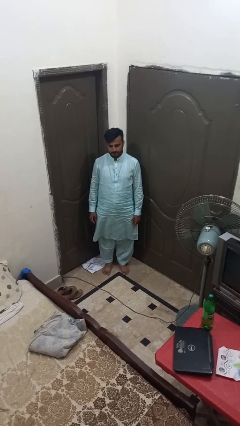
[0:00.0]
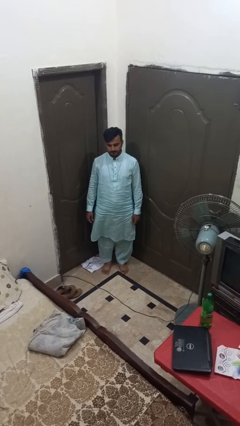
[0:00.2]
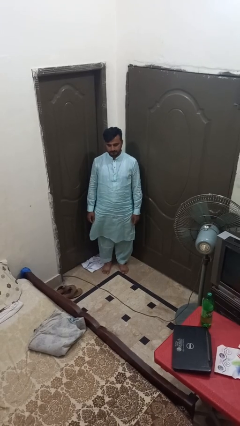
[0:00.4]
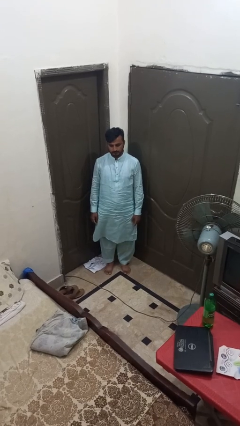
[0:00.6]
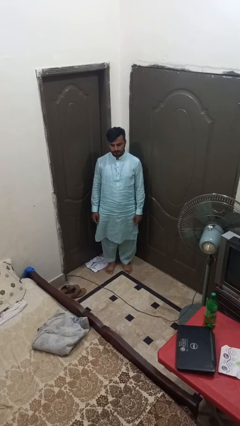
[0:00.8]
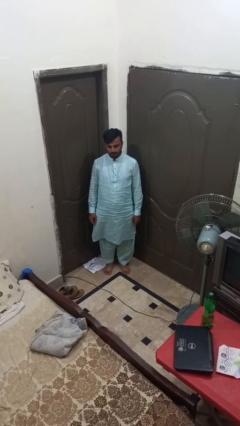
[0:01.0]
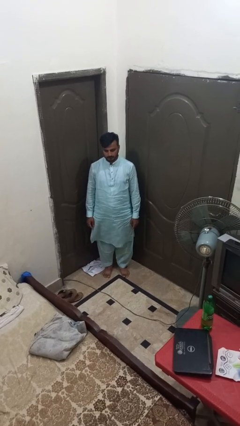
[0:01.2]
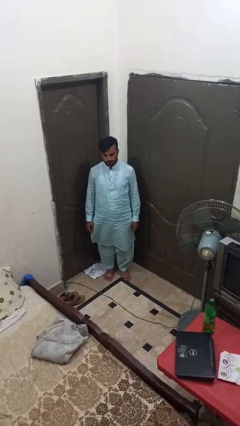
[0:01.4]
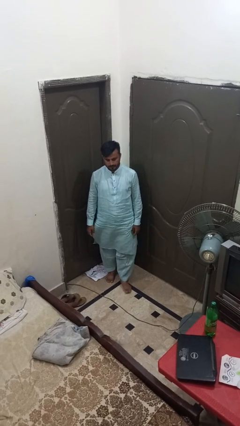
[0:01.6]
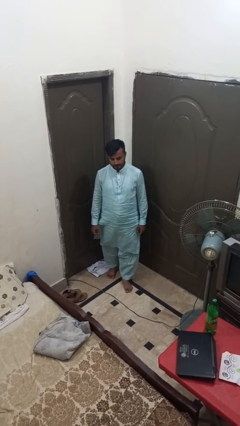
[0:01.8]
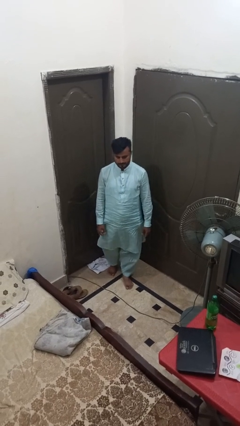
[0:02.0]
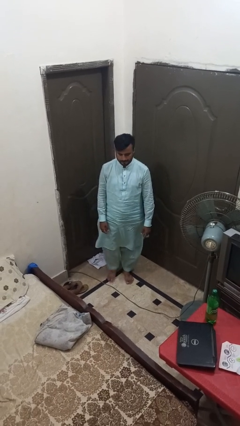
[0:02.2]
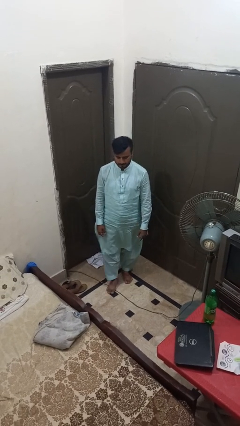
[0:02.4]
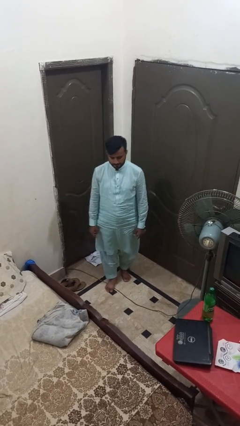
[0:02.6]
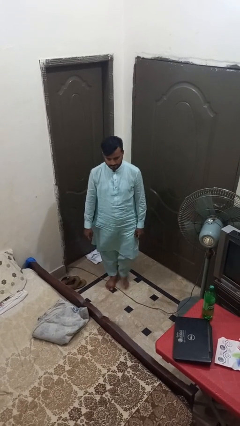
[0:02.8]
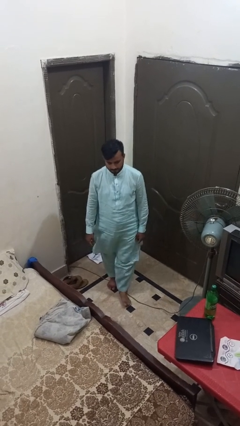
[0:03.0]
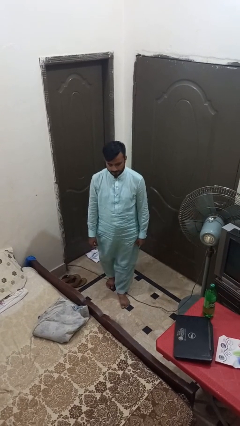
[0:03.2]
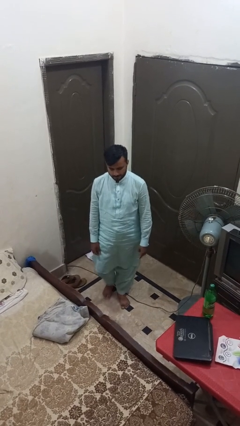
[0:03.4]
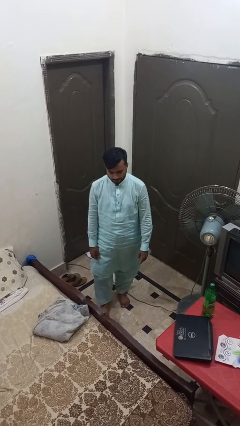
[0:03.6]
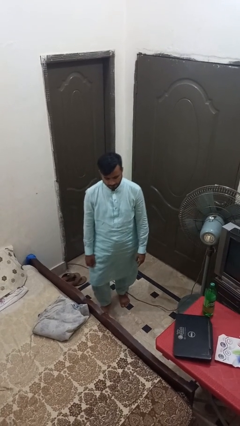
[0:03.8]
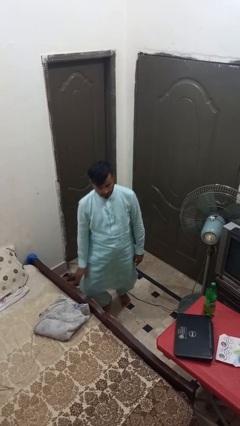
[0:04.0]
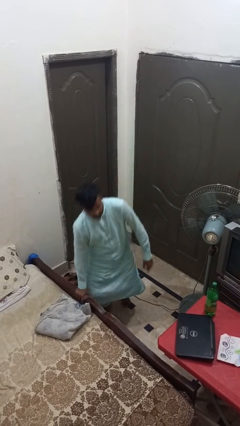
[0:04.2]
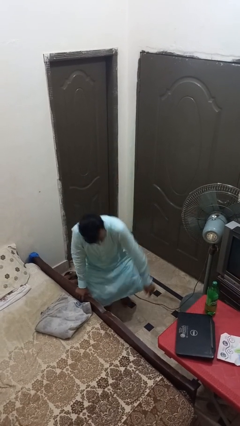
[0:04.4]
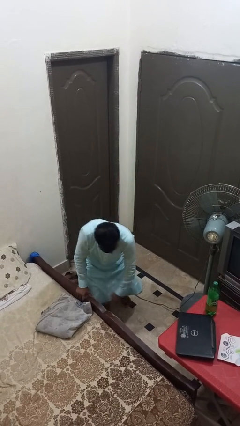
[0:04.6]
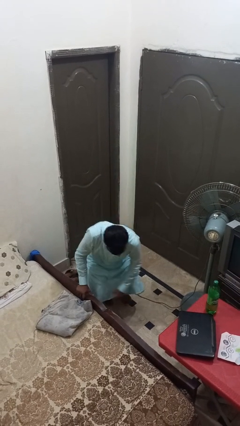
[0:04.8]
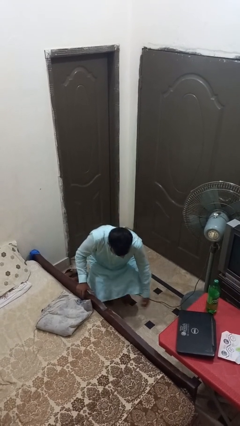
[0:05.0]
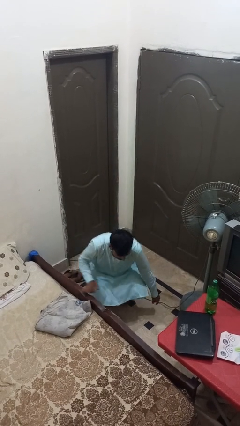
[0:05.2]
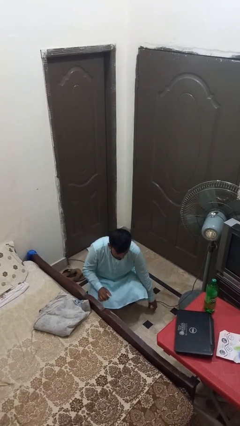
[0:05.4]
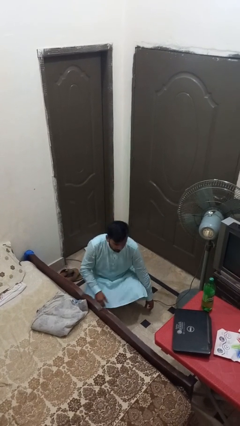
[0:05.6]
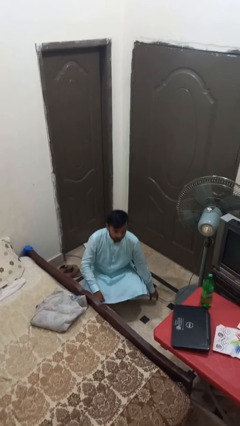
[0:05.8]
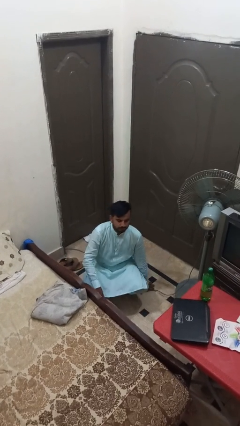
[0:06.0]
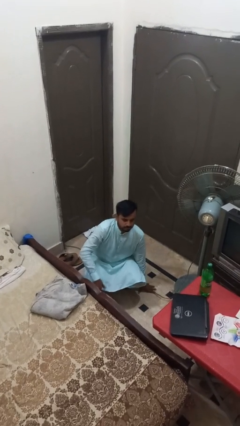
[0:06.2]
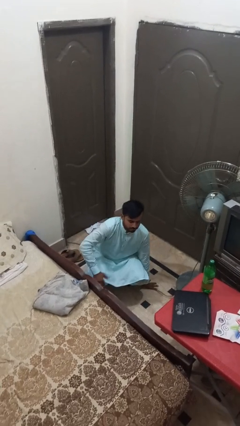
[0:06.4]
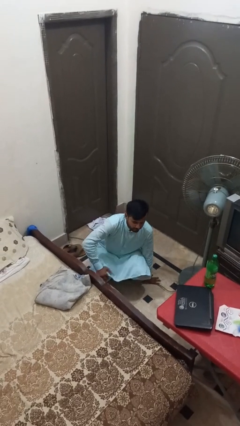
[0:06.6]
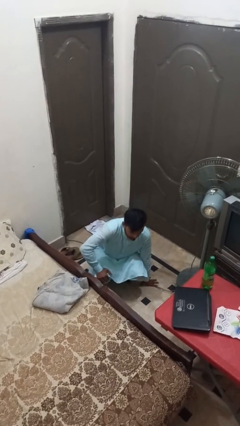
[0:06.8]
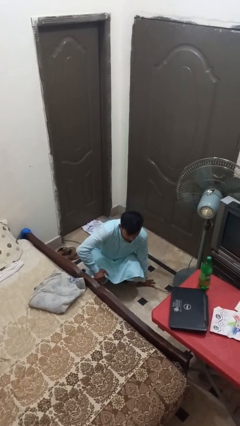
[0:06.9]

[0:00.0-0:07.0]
person trips on object on floor

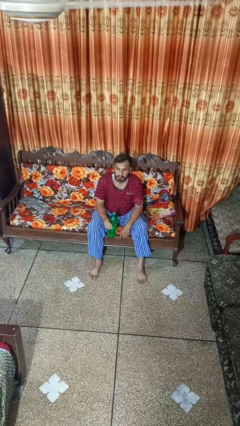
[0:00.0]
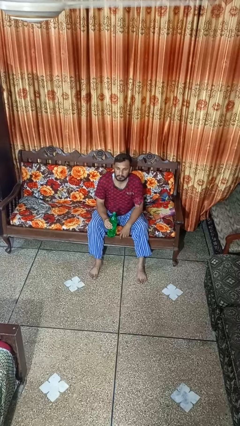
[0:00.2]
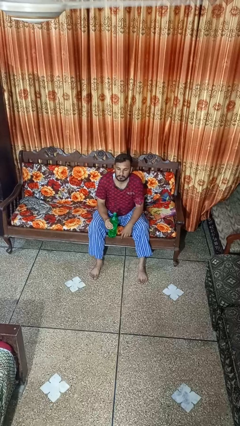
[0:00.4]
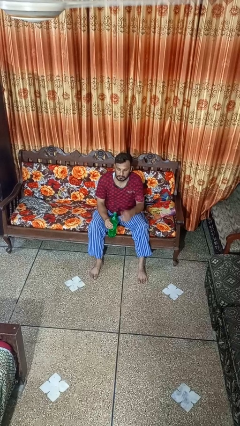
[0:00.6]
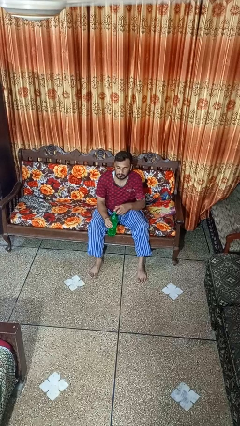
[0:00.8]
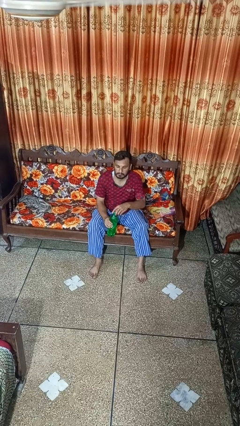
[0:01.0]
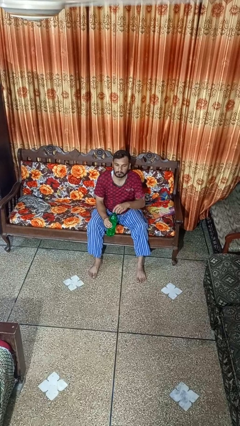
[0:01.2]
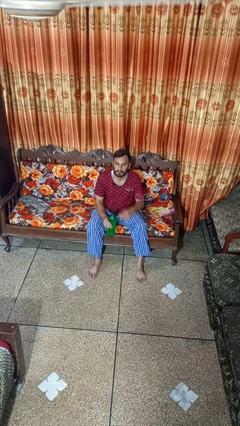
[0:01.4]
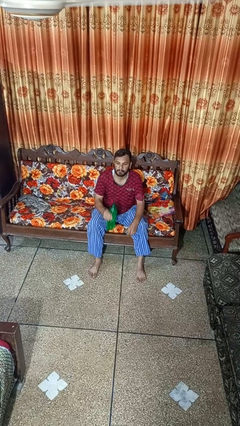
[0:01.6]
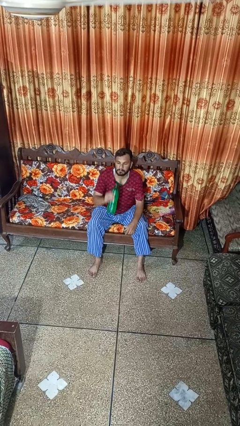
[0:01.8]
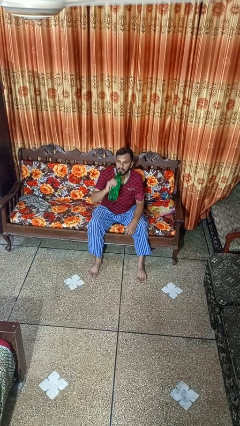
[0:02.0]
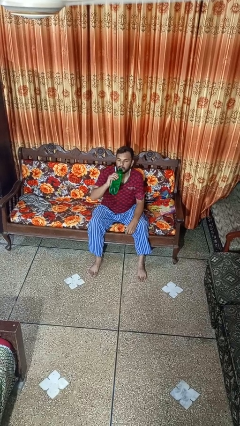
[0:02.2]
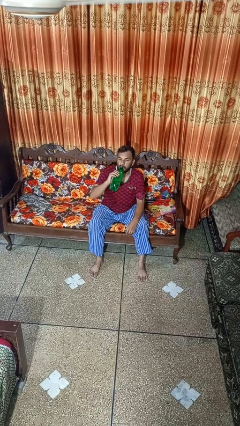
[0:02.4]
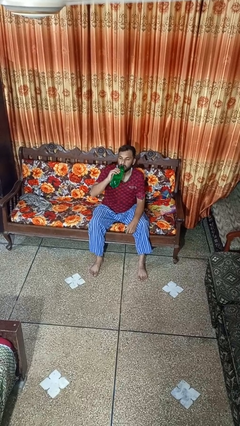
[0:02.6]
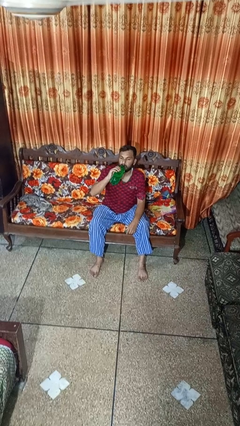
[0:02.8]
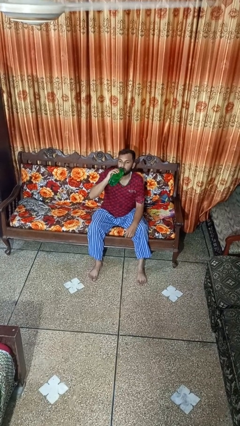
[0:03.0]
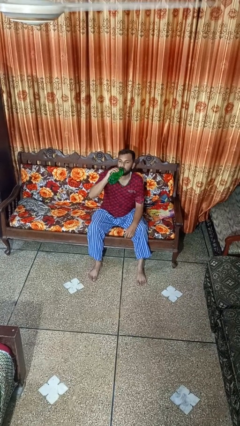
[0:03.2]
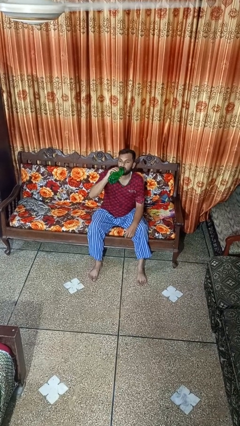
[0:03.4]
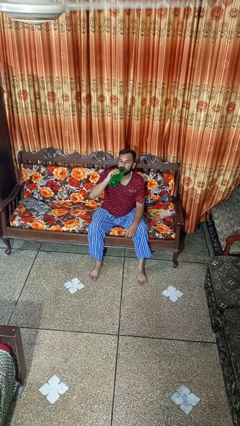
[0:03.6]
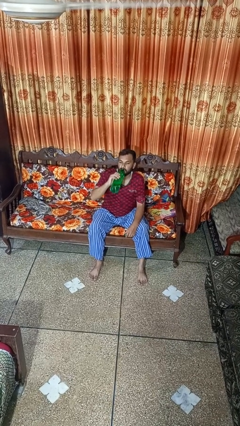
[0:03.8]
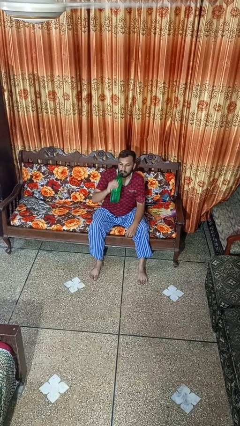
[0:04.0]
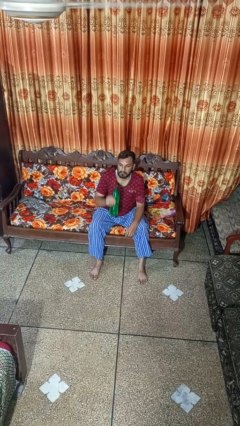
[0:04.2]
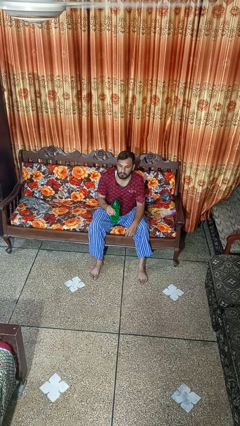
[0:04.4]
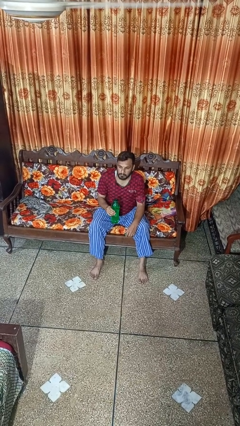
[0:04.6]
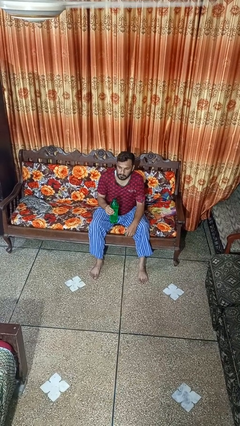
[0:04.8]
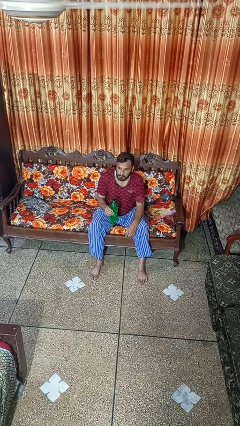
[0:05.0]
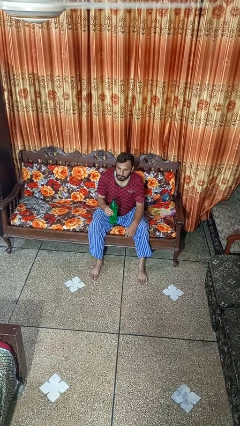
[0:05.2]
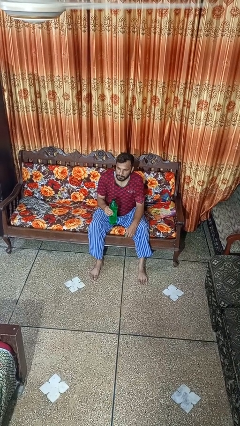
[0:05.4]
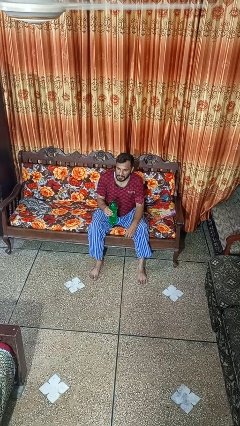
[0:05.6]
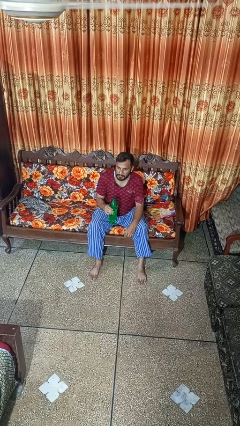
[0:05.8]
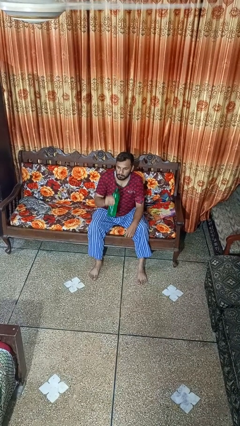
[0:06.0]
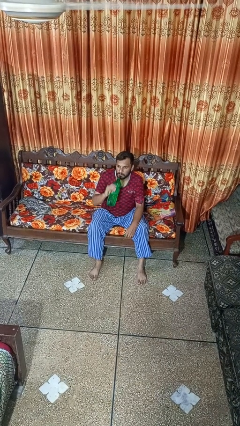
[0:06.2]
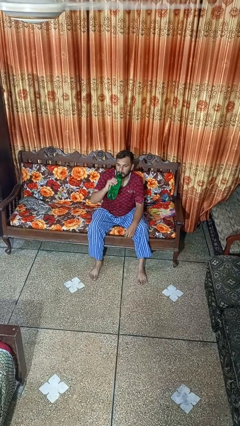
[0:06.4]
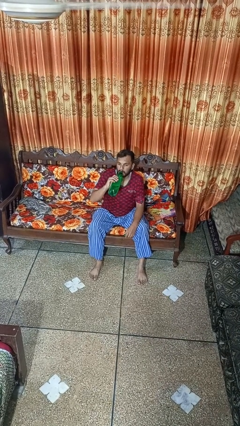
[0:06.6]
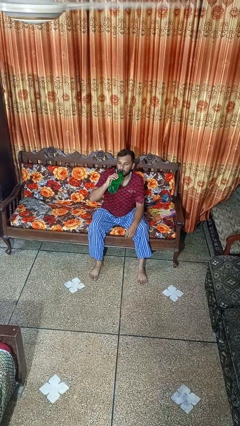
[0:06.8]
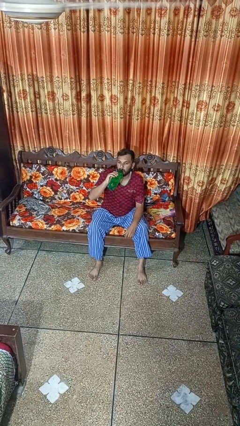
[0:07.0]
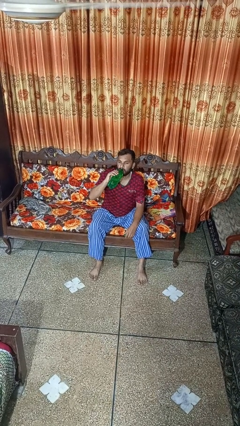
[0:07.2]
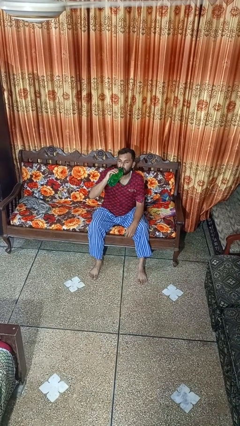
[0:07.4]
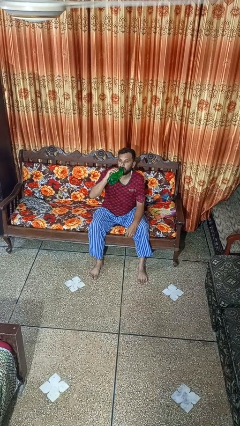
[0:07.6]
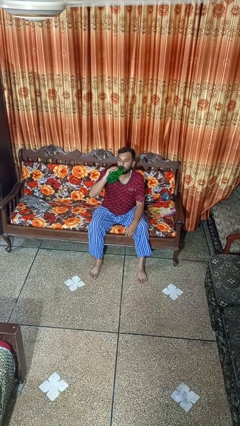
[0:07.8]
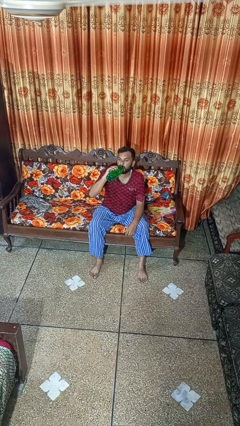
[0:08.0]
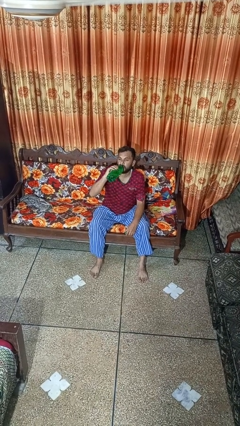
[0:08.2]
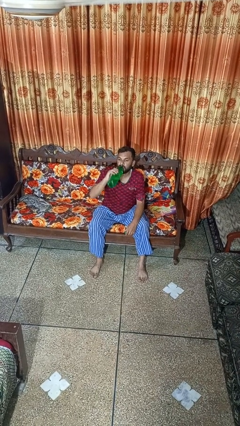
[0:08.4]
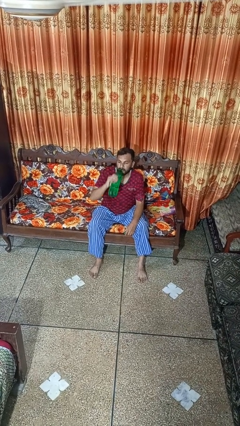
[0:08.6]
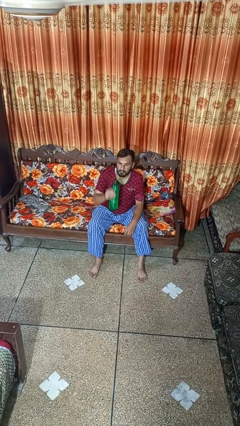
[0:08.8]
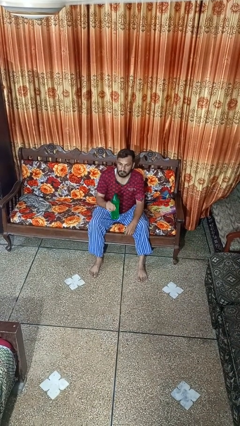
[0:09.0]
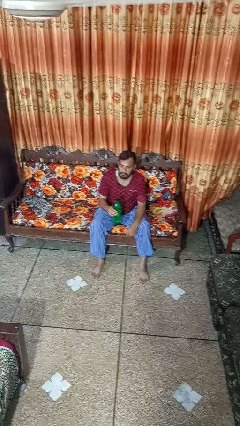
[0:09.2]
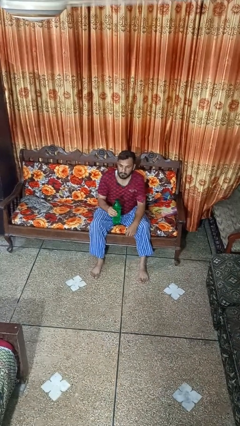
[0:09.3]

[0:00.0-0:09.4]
person drinks from bottle

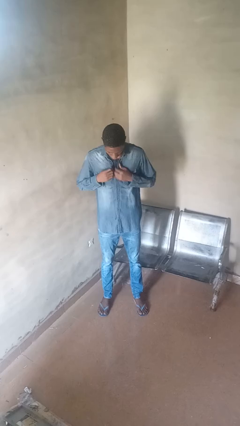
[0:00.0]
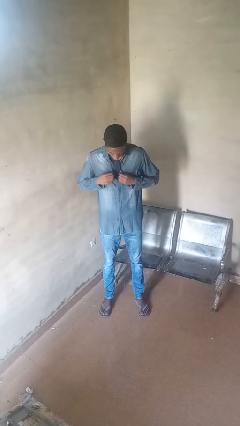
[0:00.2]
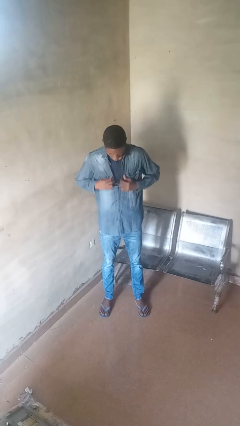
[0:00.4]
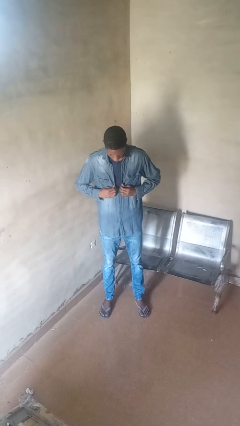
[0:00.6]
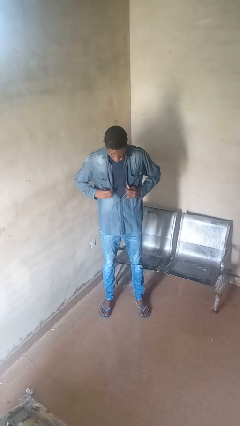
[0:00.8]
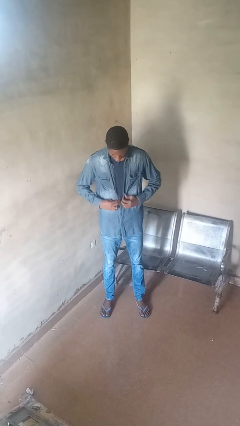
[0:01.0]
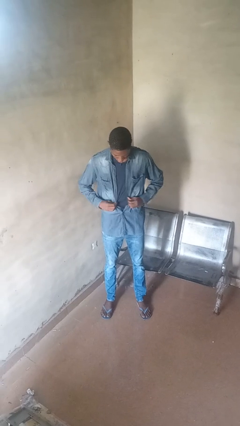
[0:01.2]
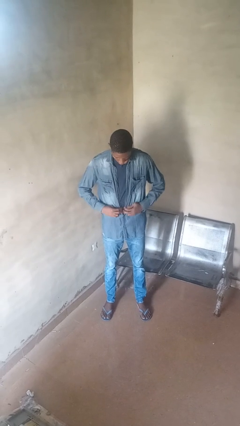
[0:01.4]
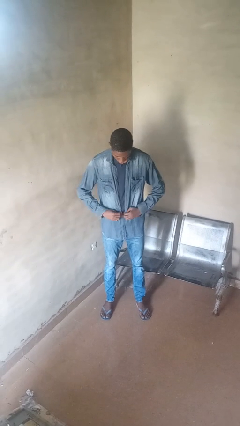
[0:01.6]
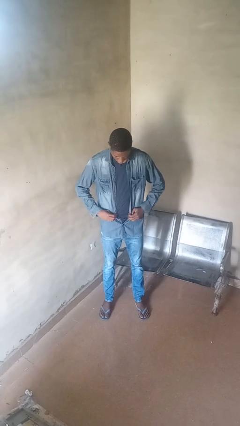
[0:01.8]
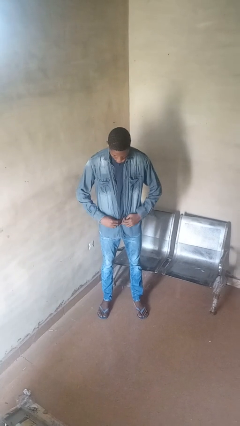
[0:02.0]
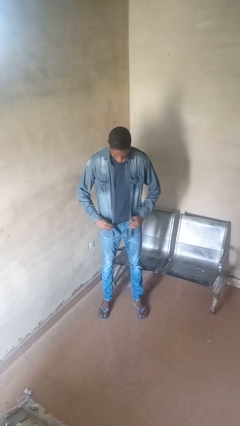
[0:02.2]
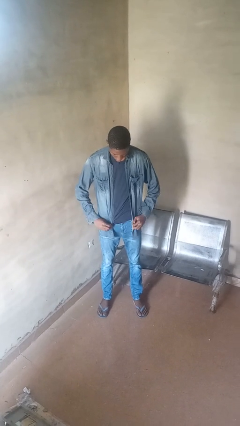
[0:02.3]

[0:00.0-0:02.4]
person unbuttons shirt
